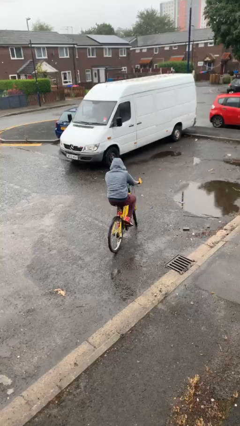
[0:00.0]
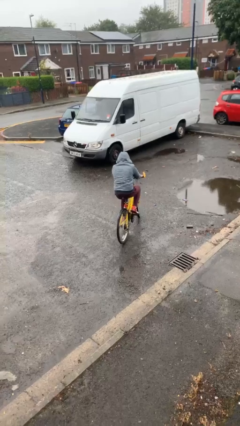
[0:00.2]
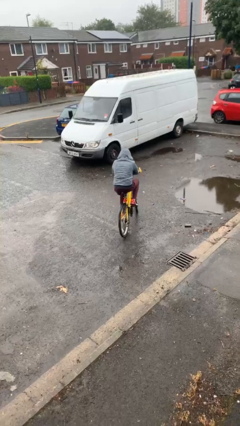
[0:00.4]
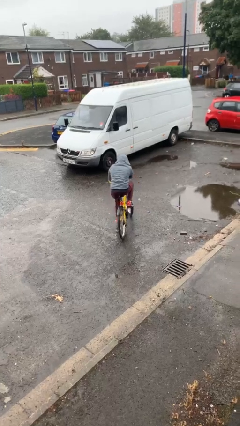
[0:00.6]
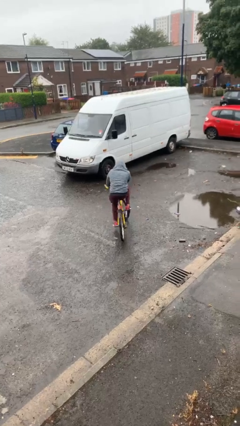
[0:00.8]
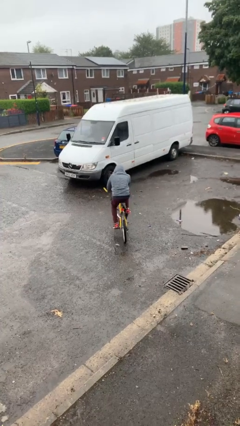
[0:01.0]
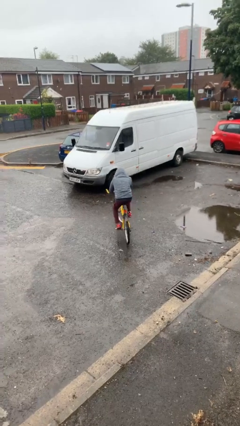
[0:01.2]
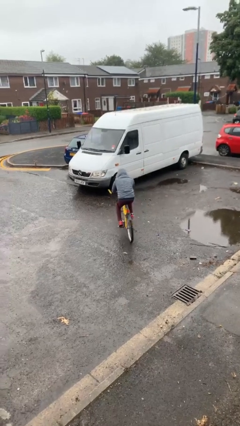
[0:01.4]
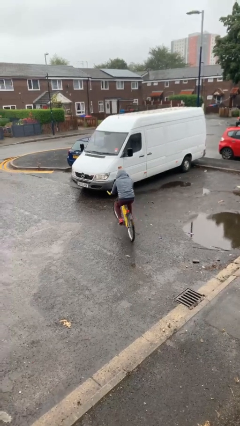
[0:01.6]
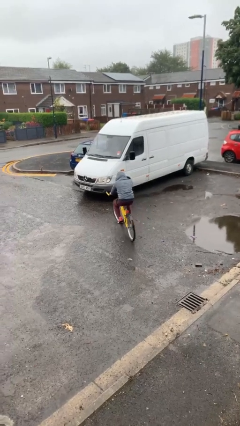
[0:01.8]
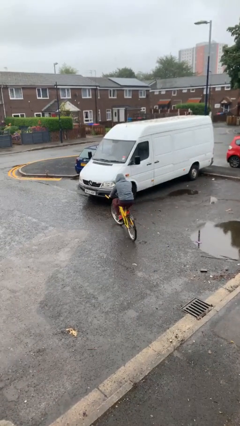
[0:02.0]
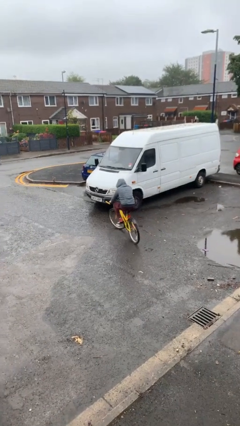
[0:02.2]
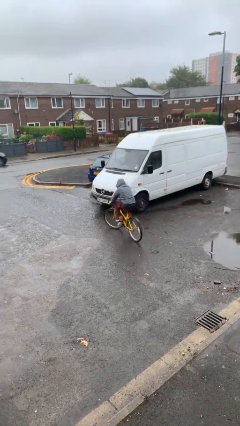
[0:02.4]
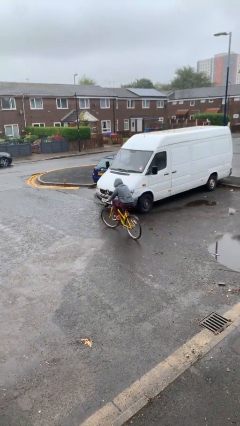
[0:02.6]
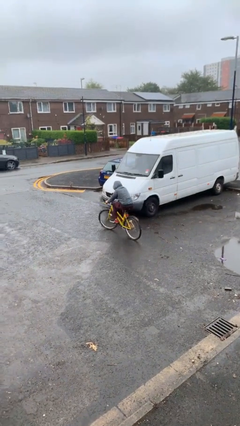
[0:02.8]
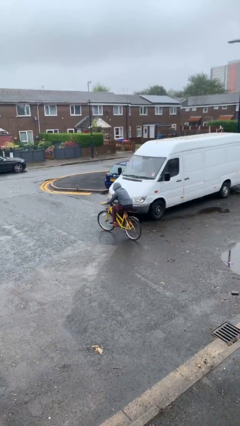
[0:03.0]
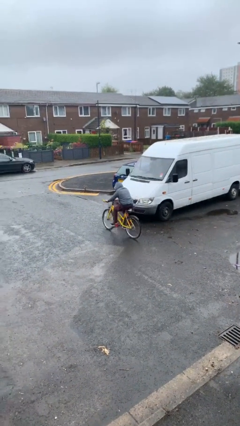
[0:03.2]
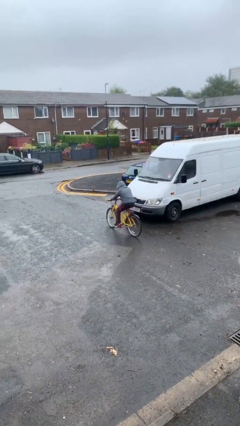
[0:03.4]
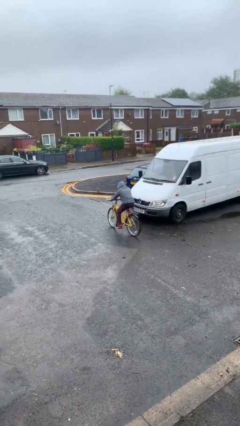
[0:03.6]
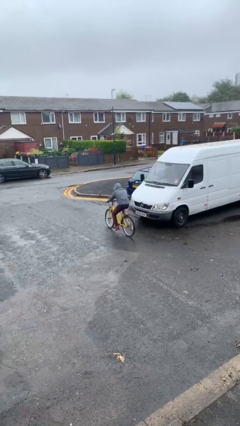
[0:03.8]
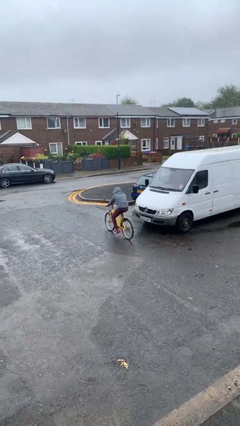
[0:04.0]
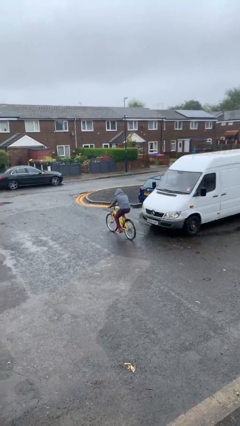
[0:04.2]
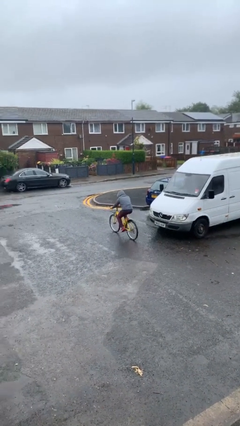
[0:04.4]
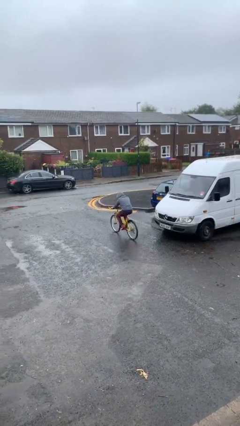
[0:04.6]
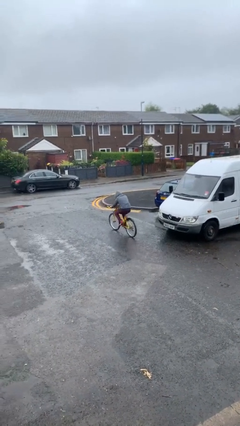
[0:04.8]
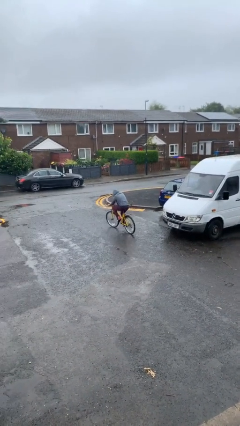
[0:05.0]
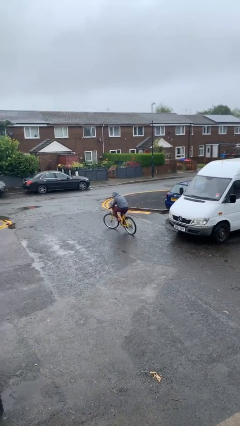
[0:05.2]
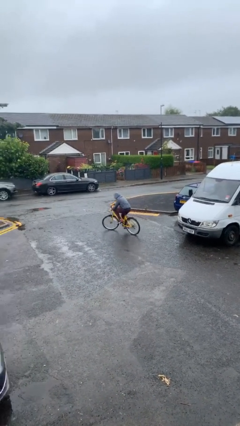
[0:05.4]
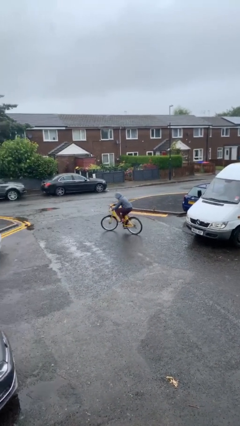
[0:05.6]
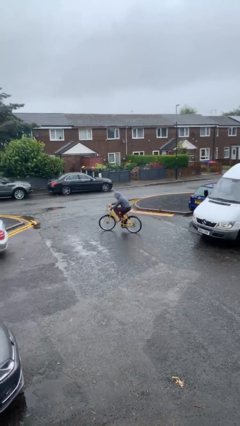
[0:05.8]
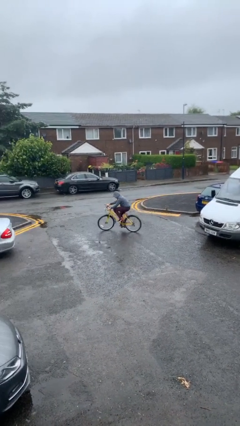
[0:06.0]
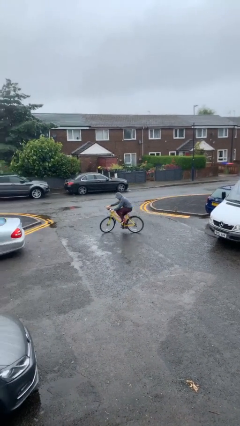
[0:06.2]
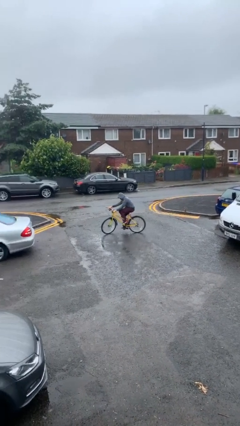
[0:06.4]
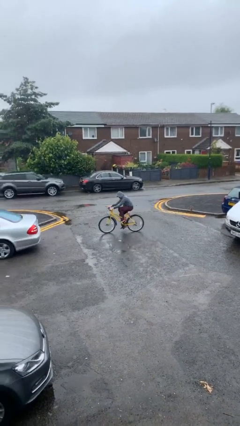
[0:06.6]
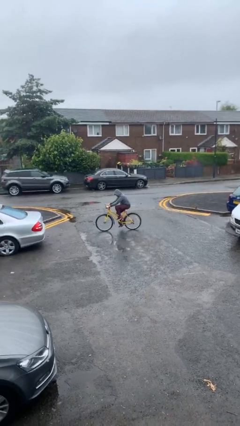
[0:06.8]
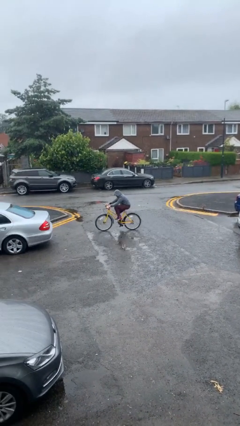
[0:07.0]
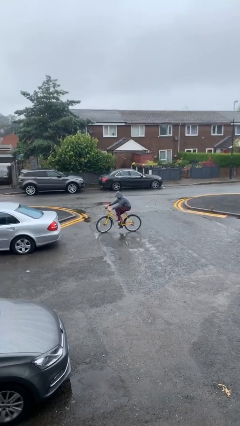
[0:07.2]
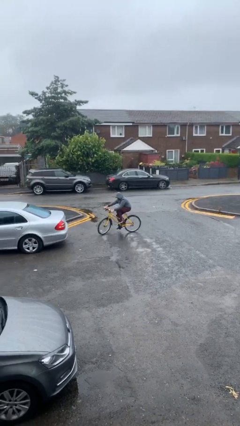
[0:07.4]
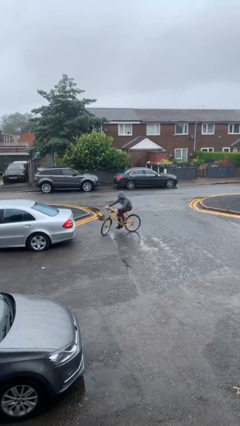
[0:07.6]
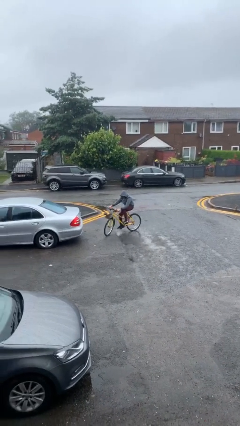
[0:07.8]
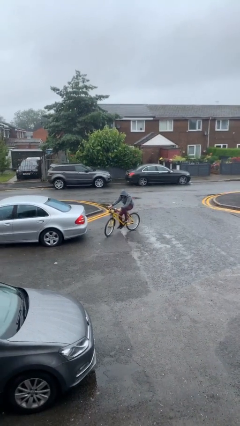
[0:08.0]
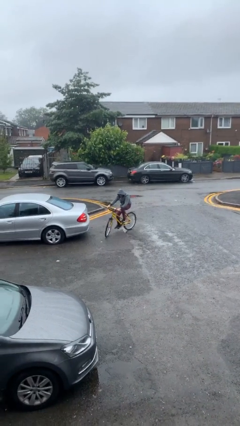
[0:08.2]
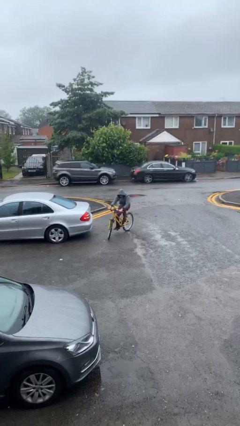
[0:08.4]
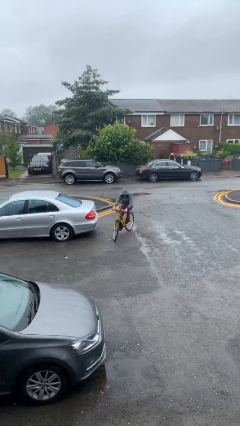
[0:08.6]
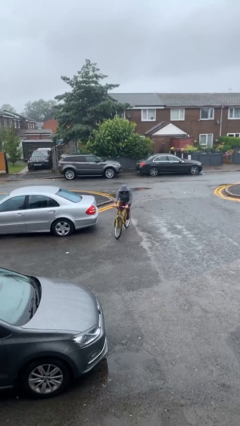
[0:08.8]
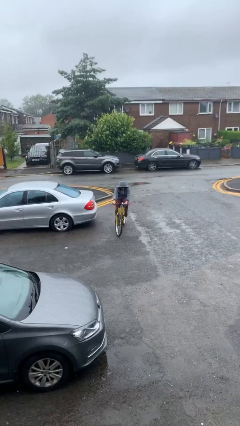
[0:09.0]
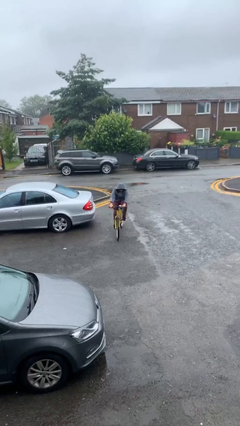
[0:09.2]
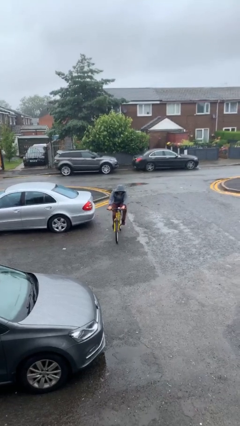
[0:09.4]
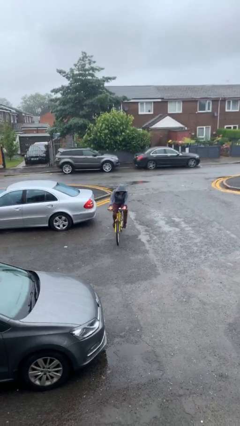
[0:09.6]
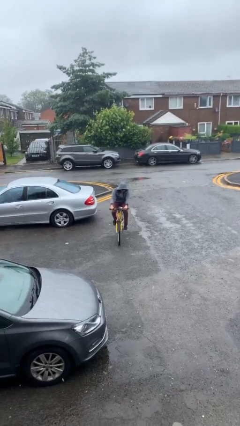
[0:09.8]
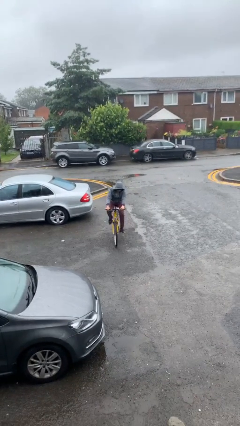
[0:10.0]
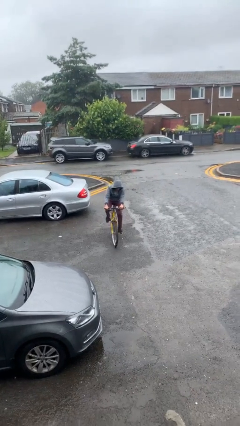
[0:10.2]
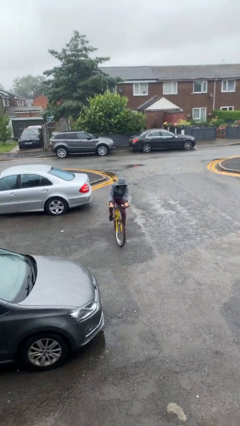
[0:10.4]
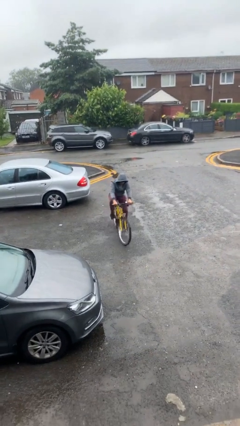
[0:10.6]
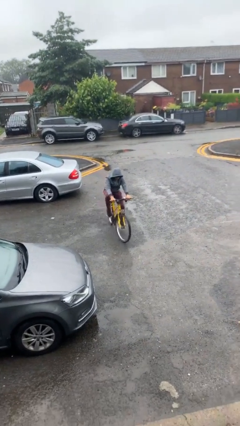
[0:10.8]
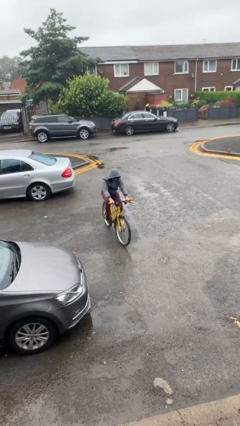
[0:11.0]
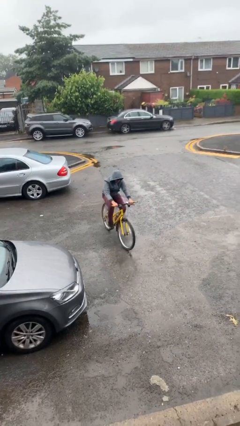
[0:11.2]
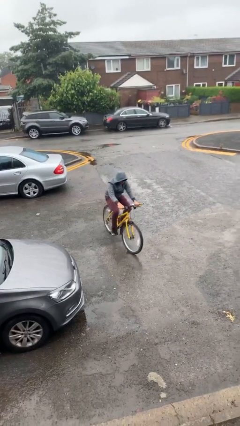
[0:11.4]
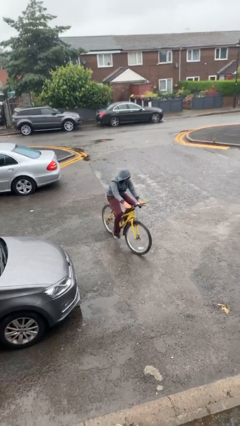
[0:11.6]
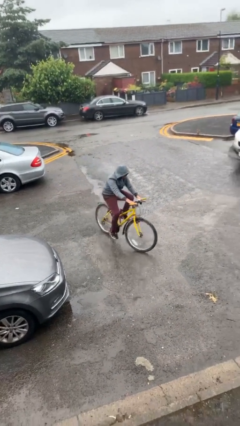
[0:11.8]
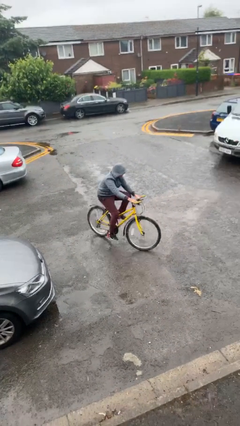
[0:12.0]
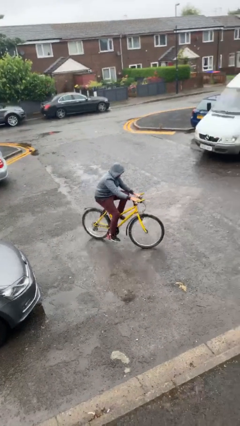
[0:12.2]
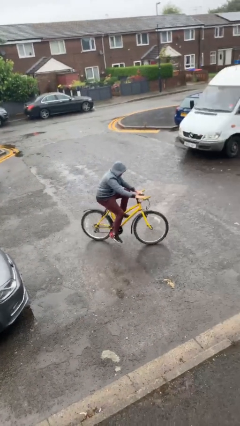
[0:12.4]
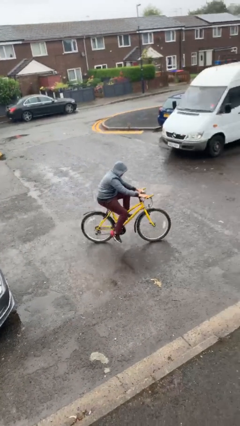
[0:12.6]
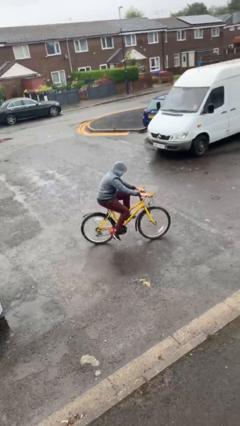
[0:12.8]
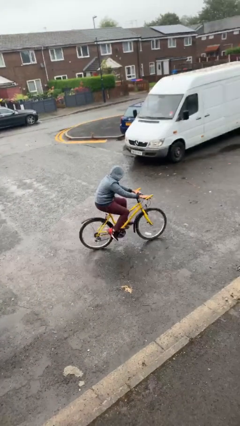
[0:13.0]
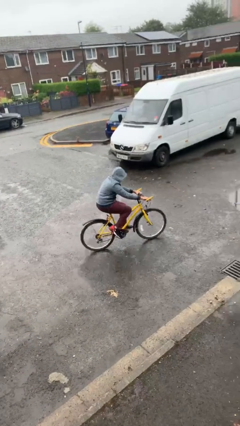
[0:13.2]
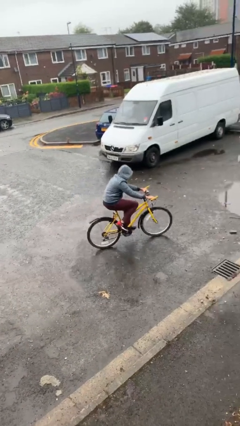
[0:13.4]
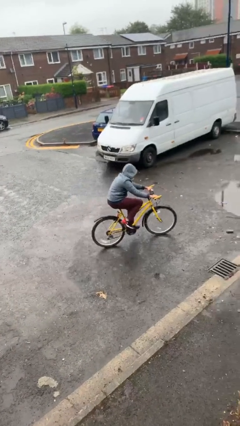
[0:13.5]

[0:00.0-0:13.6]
person rides bicycle

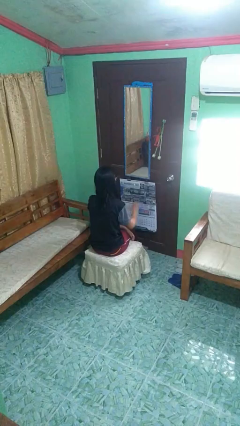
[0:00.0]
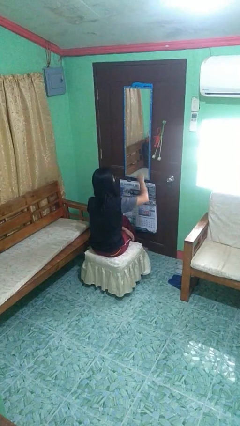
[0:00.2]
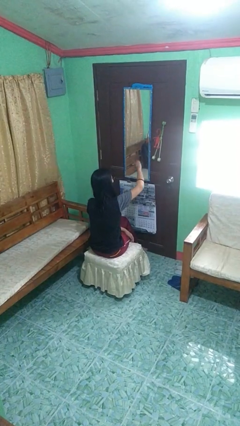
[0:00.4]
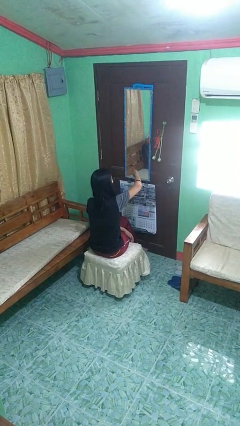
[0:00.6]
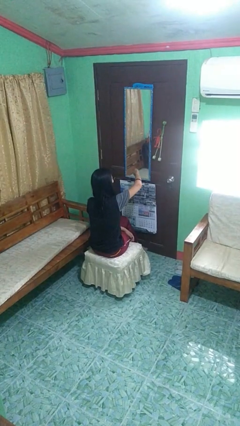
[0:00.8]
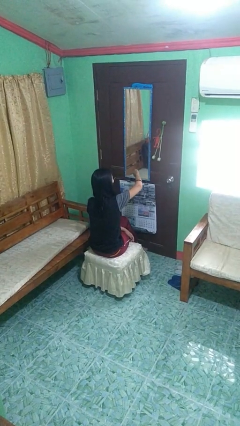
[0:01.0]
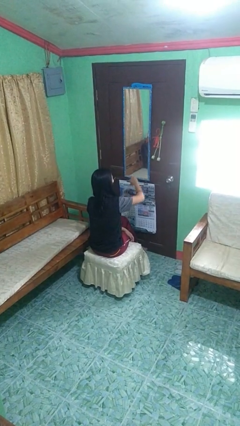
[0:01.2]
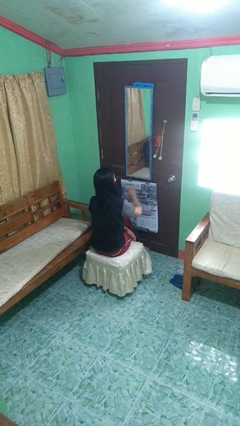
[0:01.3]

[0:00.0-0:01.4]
person gestures thumbs down

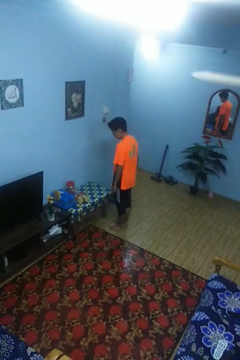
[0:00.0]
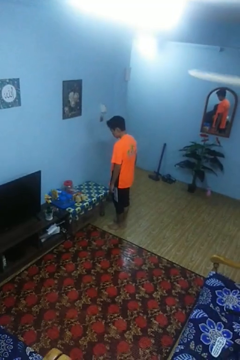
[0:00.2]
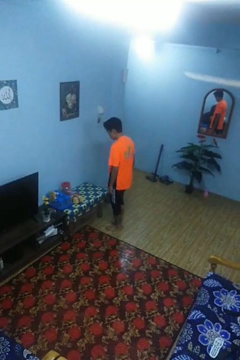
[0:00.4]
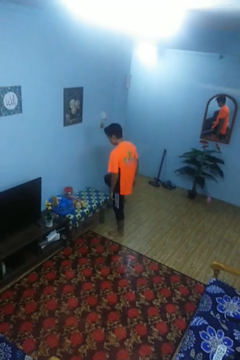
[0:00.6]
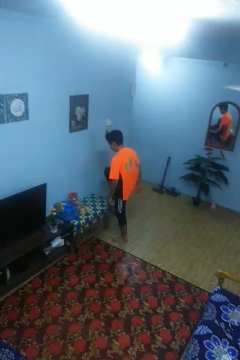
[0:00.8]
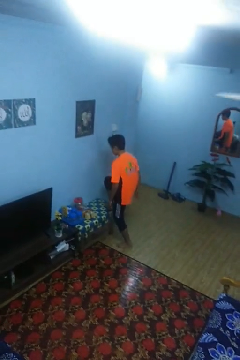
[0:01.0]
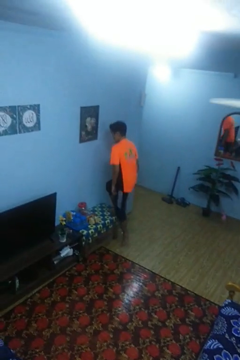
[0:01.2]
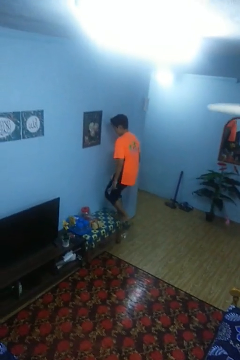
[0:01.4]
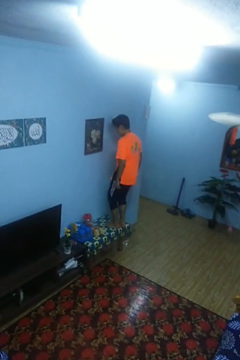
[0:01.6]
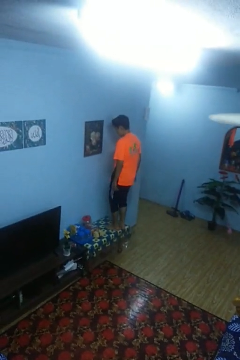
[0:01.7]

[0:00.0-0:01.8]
person climbs on table

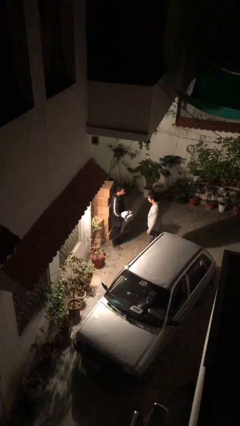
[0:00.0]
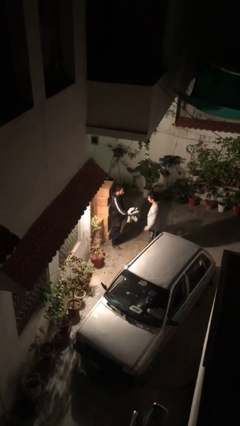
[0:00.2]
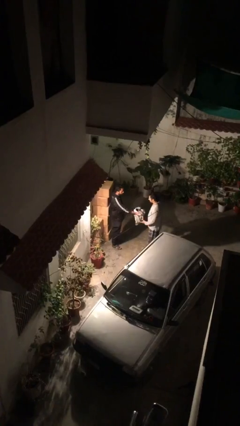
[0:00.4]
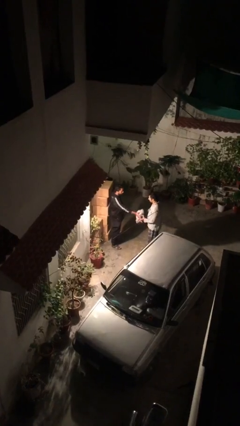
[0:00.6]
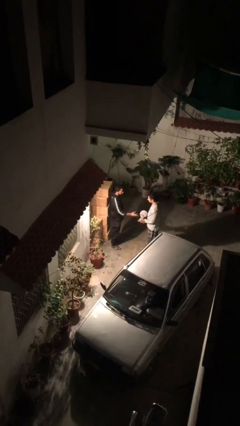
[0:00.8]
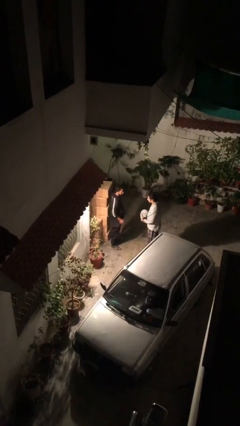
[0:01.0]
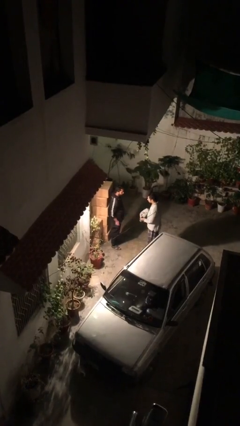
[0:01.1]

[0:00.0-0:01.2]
person transfers object to person
